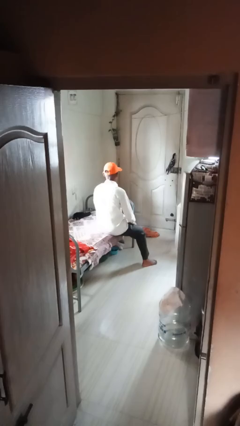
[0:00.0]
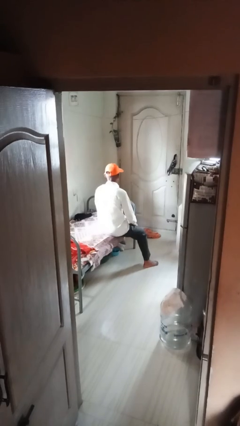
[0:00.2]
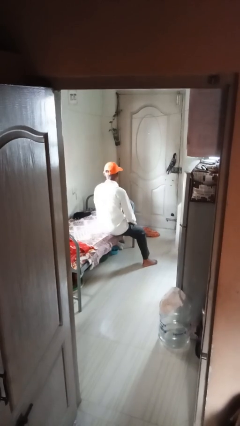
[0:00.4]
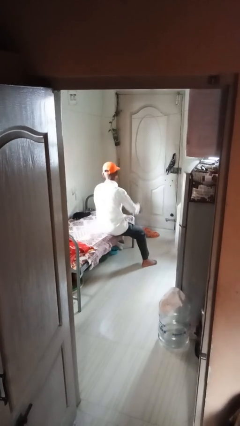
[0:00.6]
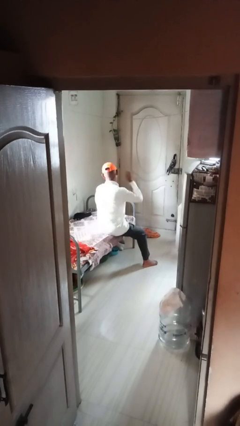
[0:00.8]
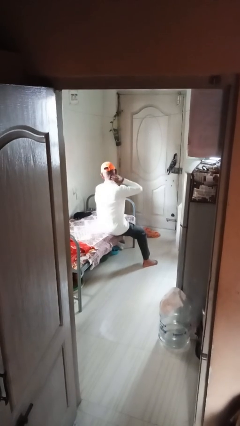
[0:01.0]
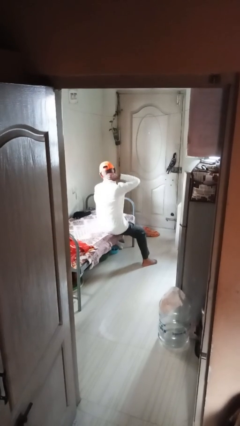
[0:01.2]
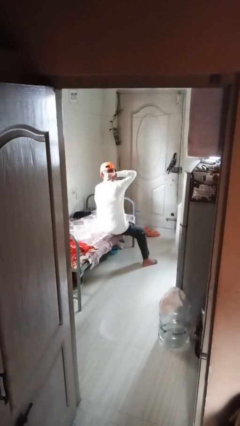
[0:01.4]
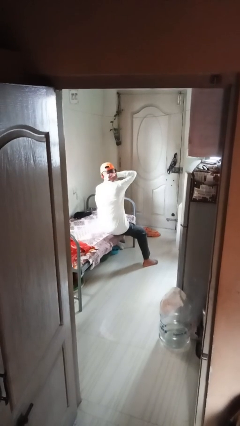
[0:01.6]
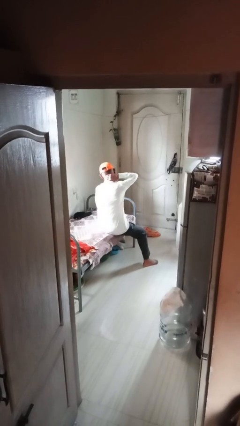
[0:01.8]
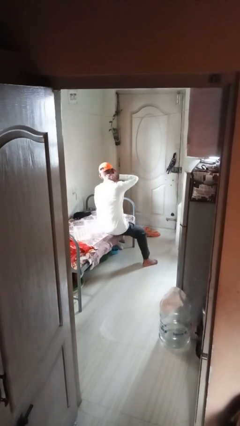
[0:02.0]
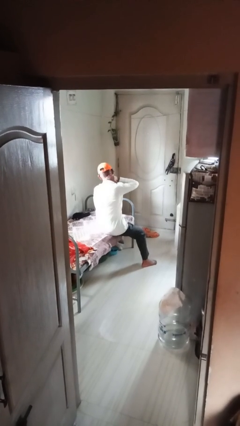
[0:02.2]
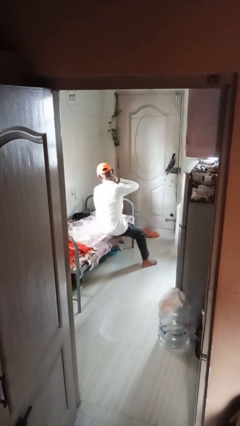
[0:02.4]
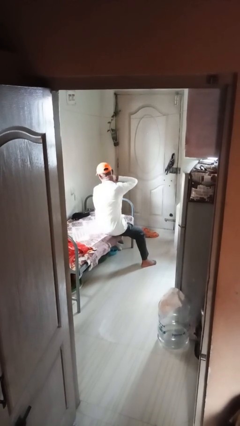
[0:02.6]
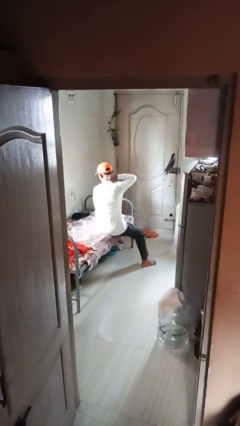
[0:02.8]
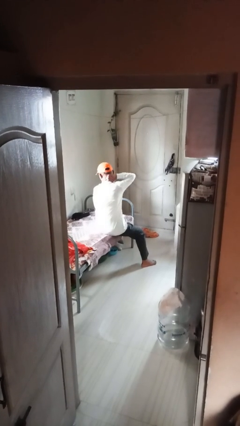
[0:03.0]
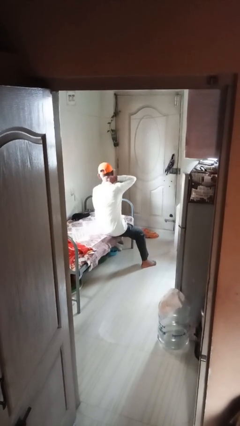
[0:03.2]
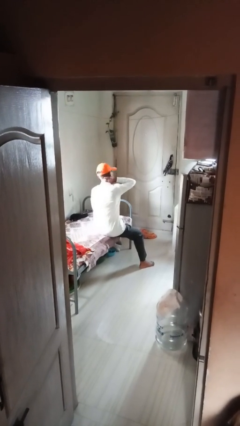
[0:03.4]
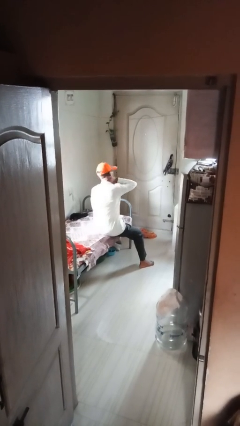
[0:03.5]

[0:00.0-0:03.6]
person rubs neck

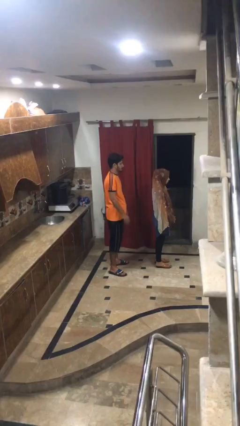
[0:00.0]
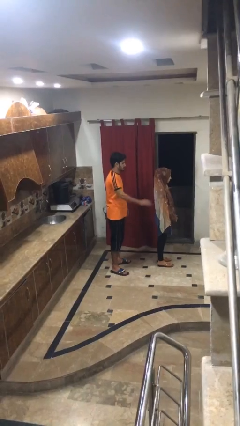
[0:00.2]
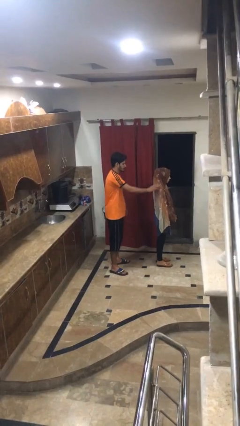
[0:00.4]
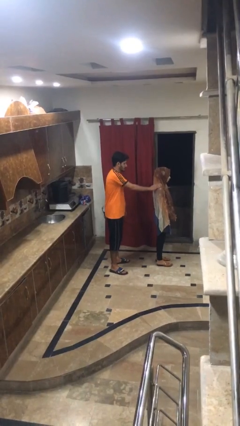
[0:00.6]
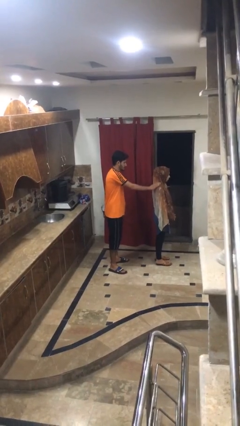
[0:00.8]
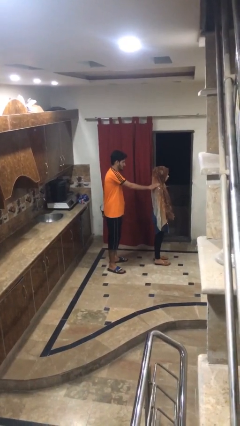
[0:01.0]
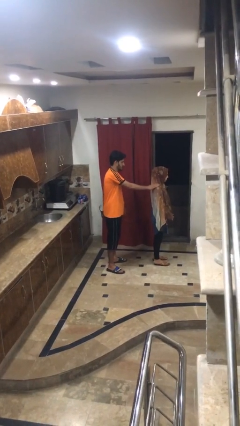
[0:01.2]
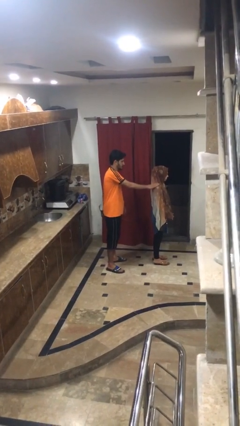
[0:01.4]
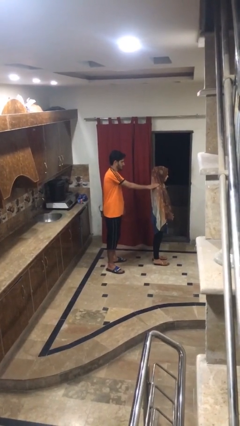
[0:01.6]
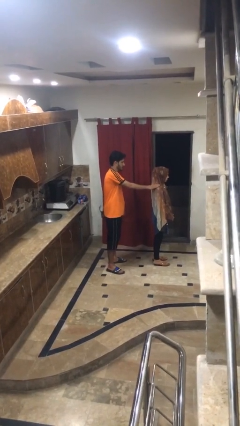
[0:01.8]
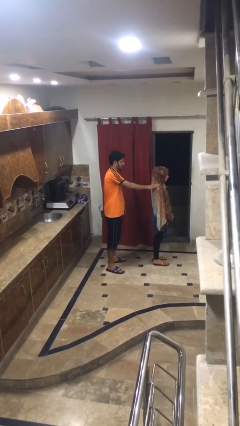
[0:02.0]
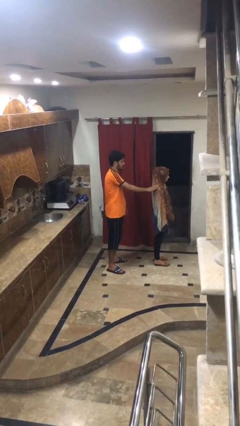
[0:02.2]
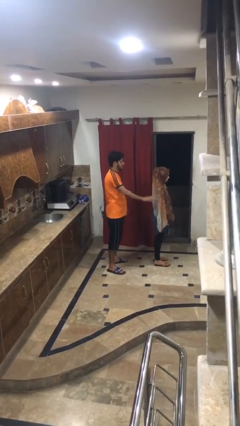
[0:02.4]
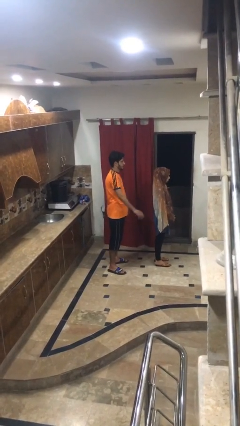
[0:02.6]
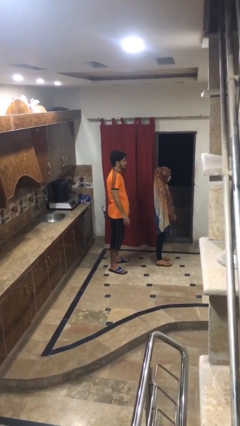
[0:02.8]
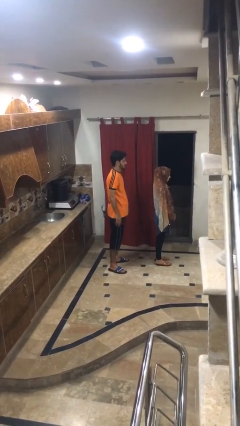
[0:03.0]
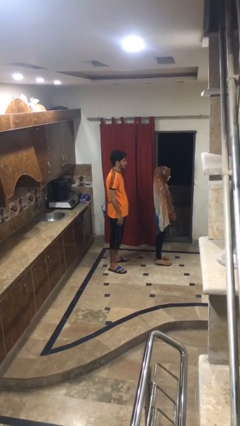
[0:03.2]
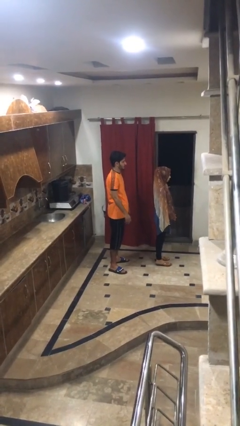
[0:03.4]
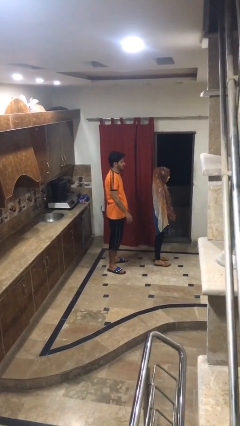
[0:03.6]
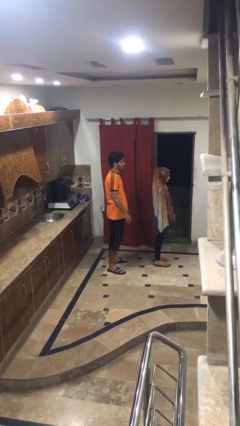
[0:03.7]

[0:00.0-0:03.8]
person touches back of person

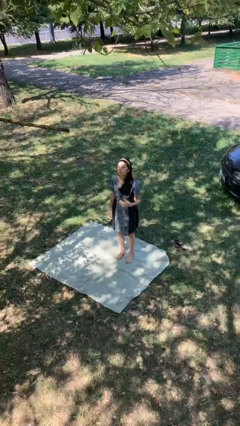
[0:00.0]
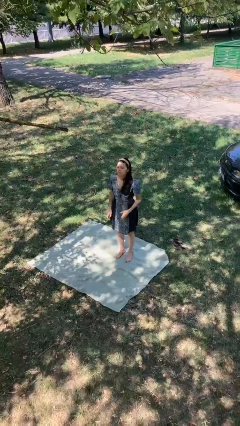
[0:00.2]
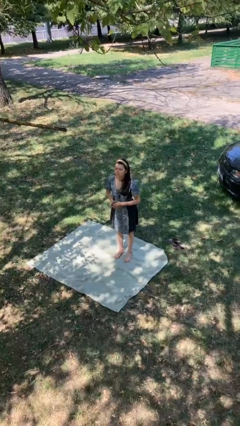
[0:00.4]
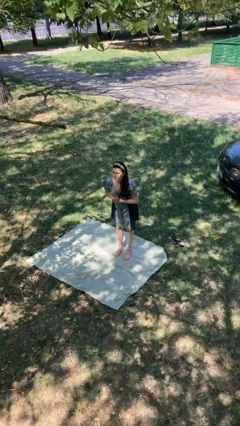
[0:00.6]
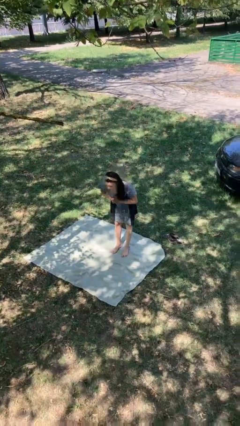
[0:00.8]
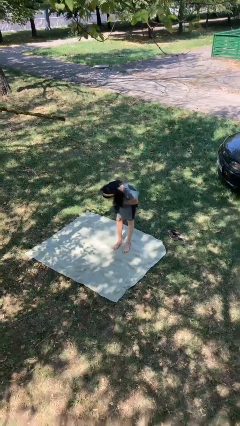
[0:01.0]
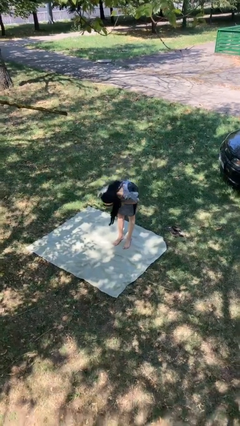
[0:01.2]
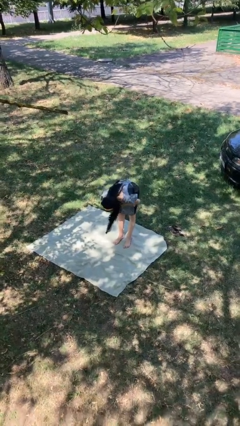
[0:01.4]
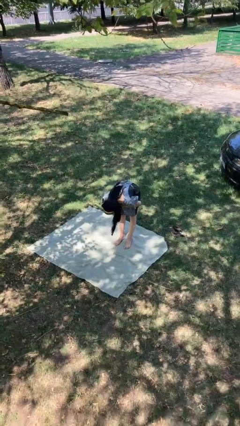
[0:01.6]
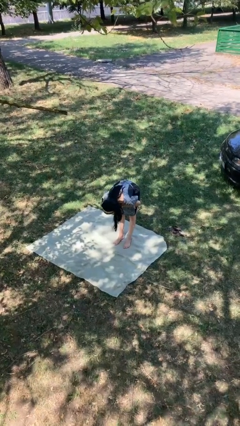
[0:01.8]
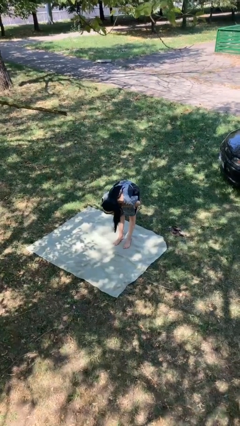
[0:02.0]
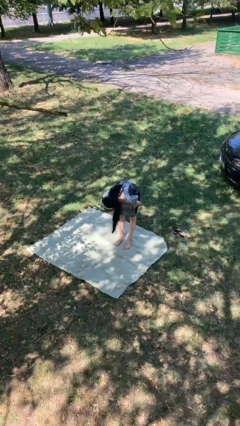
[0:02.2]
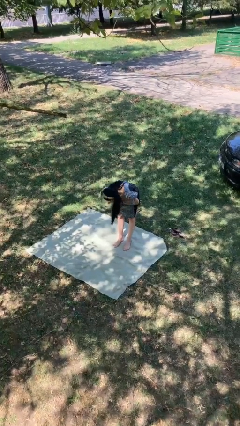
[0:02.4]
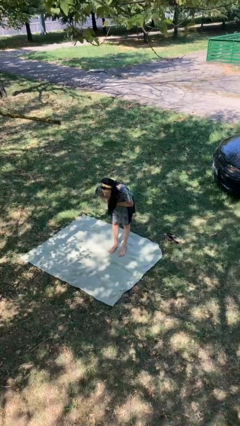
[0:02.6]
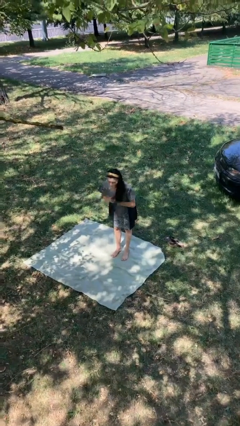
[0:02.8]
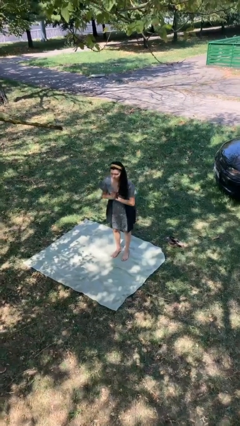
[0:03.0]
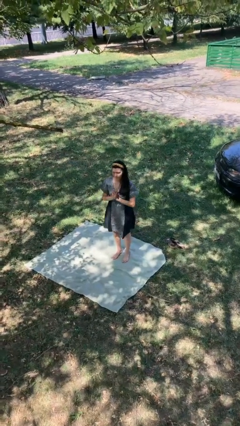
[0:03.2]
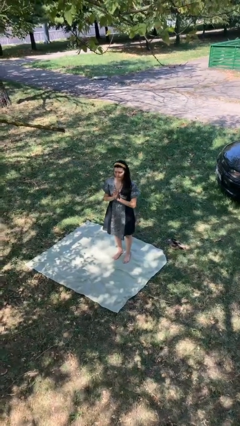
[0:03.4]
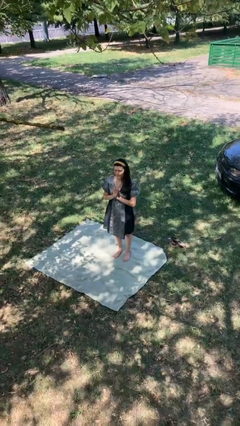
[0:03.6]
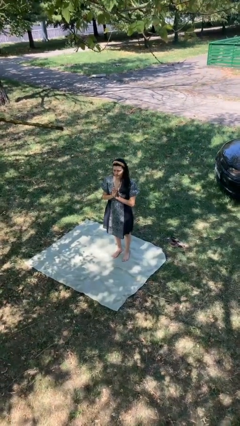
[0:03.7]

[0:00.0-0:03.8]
person bows

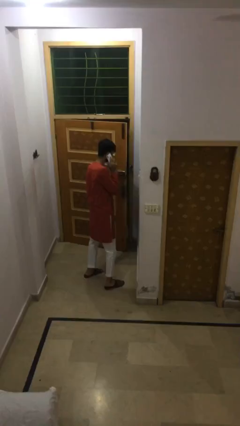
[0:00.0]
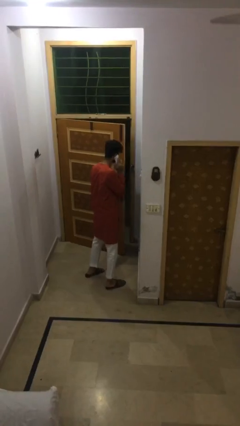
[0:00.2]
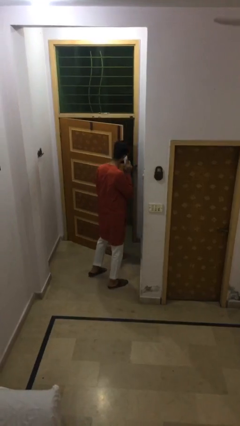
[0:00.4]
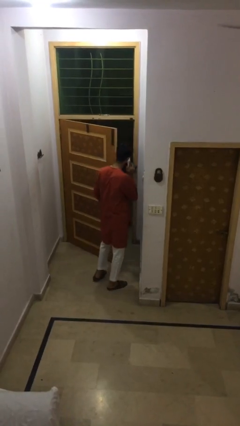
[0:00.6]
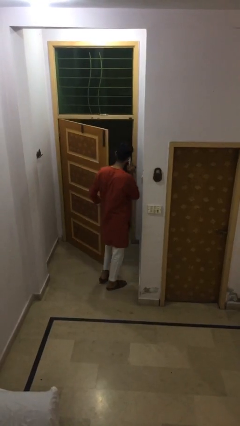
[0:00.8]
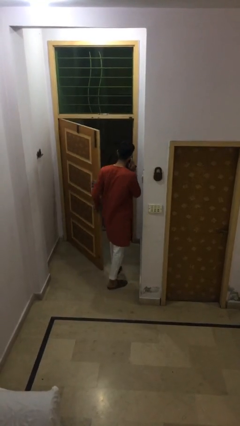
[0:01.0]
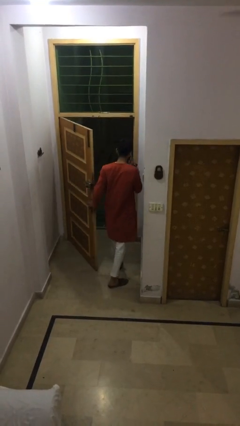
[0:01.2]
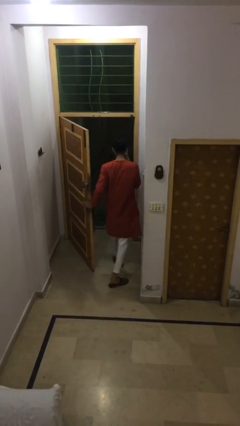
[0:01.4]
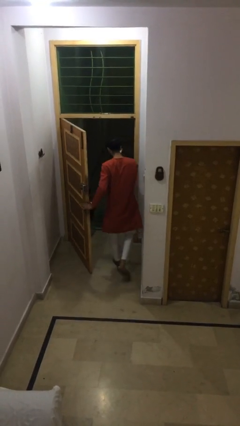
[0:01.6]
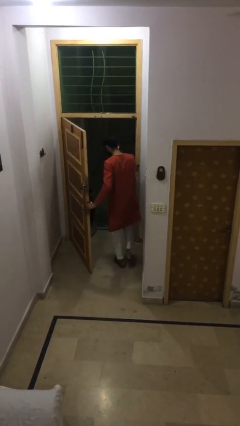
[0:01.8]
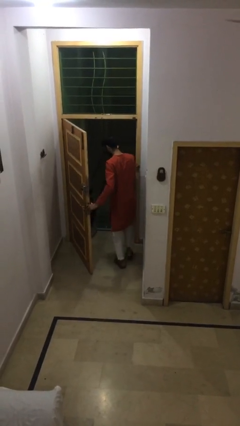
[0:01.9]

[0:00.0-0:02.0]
person exits scene through structure

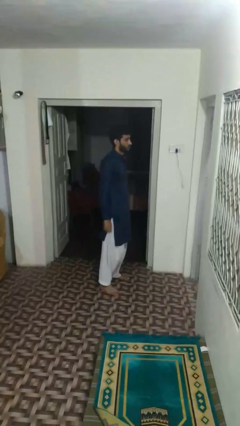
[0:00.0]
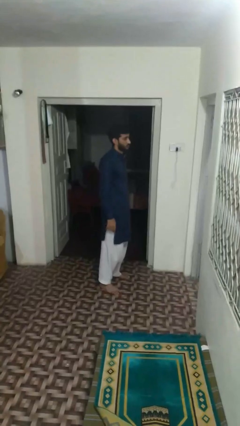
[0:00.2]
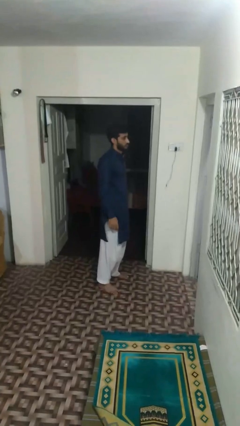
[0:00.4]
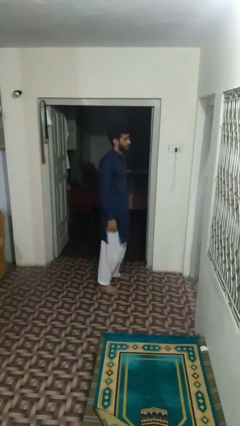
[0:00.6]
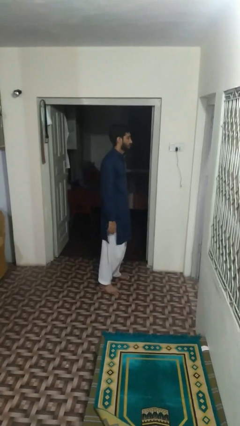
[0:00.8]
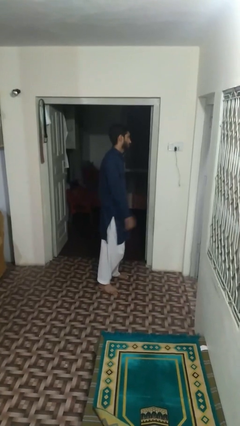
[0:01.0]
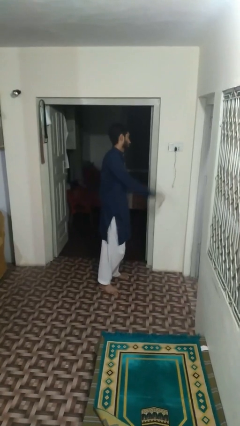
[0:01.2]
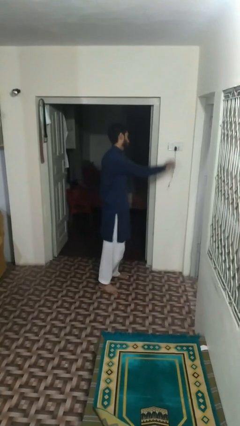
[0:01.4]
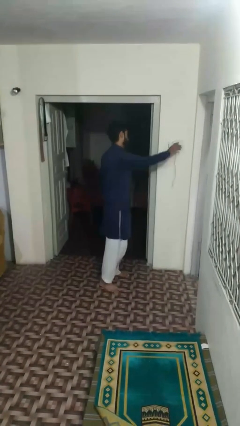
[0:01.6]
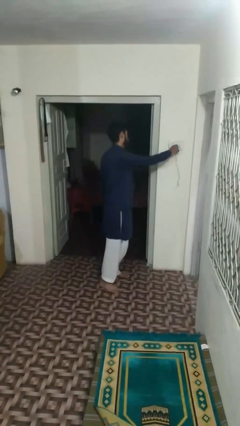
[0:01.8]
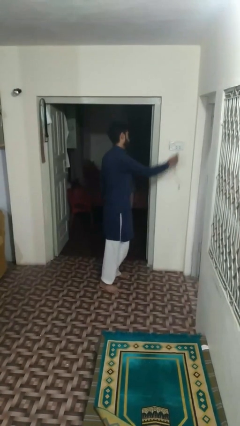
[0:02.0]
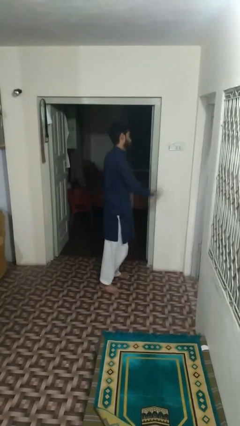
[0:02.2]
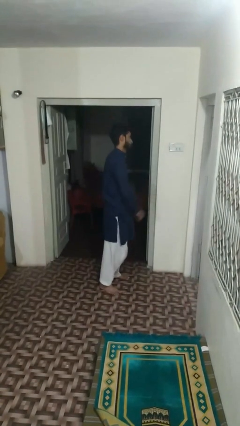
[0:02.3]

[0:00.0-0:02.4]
person unplugs from electrical socket

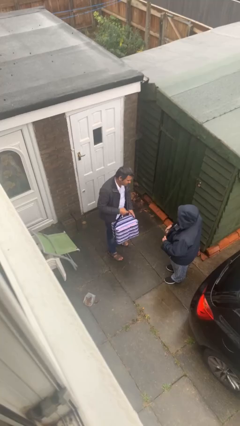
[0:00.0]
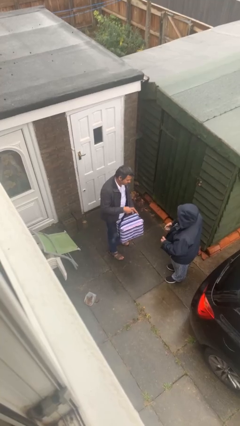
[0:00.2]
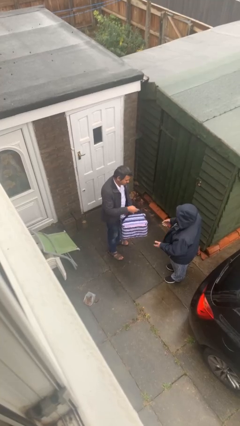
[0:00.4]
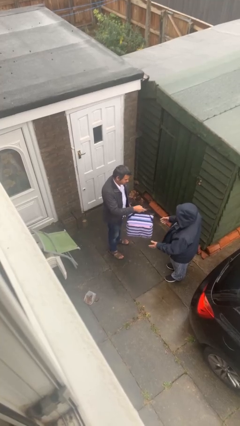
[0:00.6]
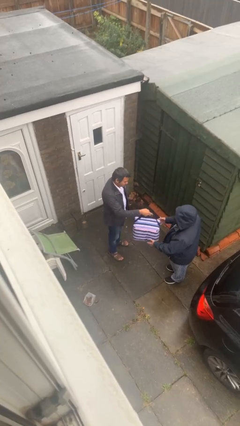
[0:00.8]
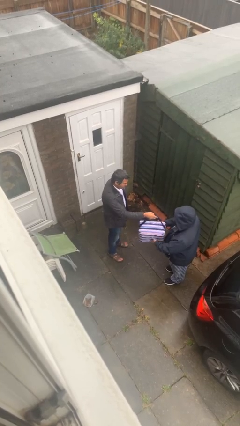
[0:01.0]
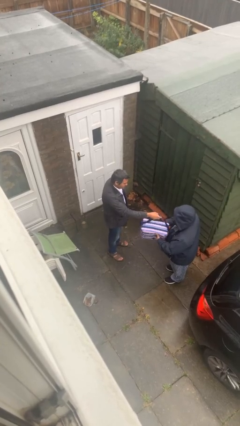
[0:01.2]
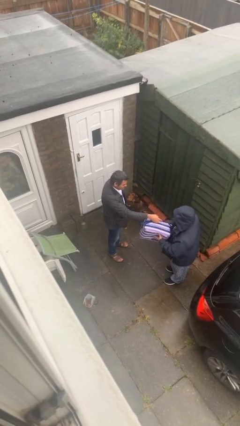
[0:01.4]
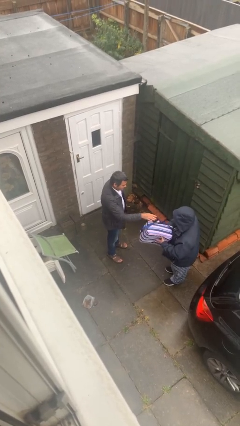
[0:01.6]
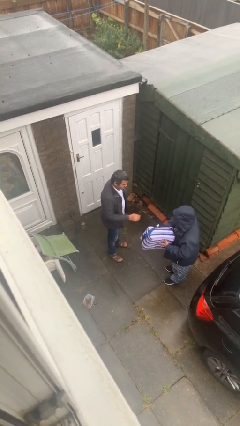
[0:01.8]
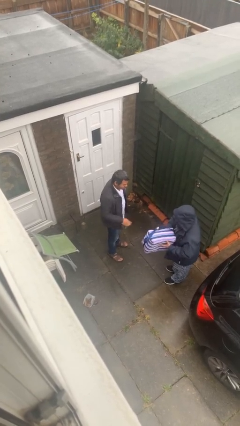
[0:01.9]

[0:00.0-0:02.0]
person transfers object to person
